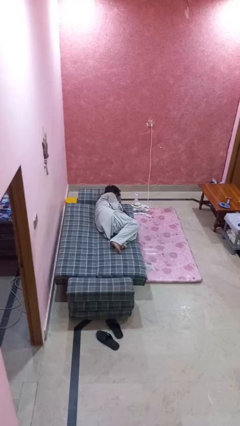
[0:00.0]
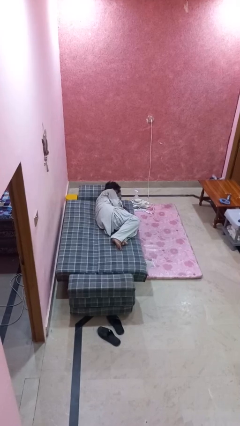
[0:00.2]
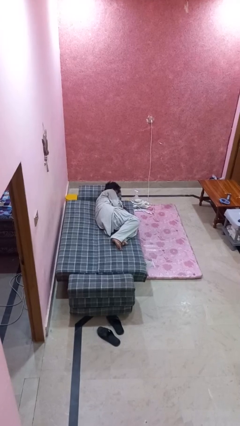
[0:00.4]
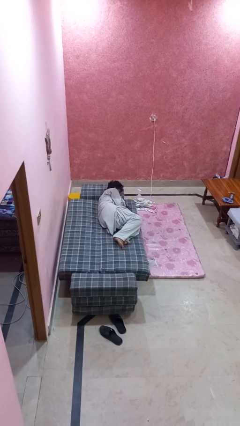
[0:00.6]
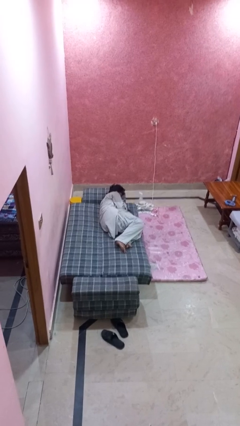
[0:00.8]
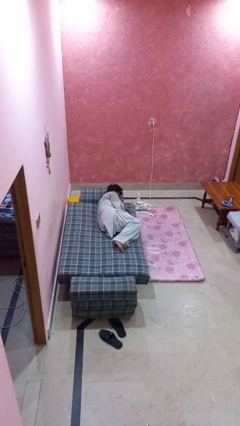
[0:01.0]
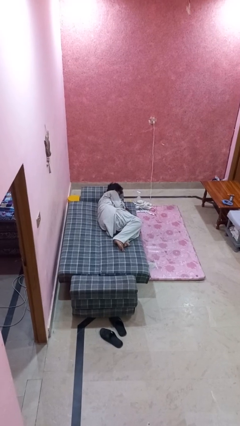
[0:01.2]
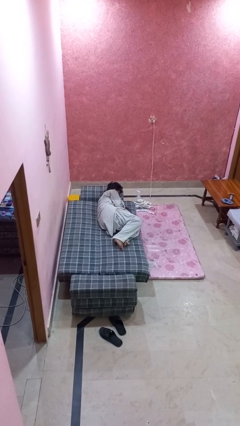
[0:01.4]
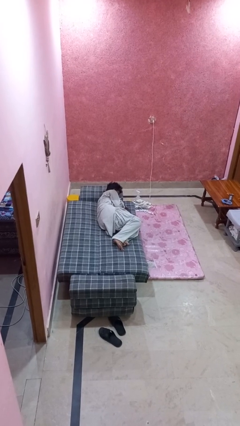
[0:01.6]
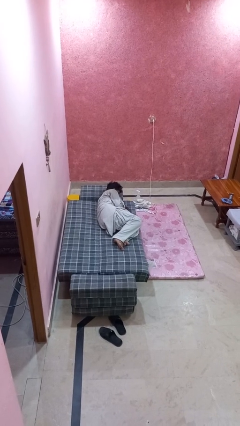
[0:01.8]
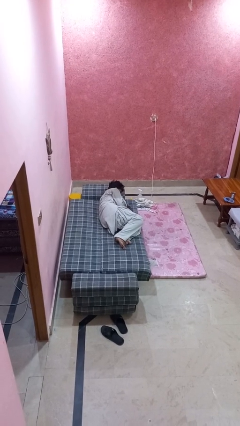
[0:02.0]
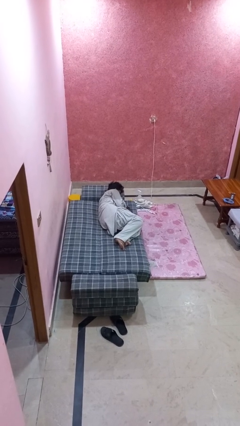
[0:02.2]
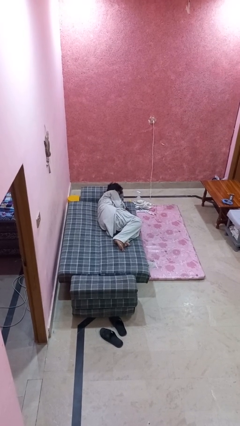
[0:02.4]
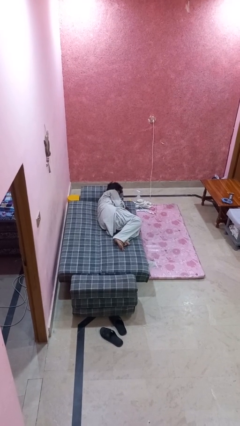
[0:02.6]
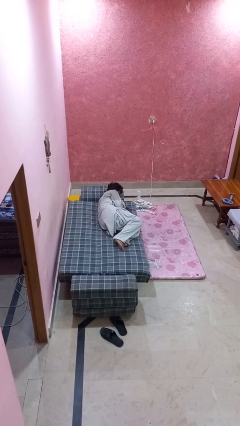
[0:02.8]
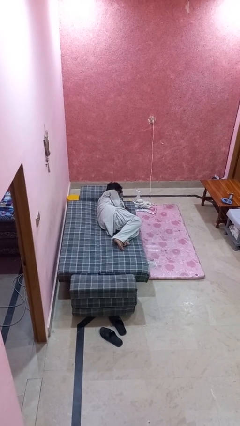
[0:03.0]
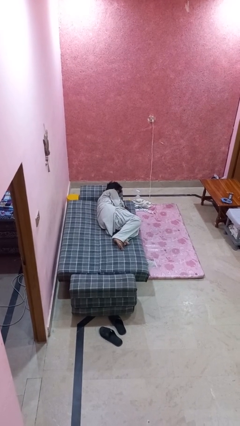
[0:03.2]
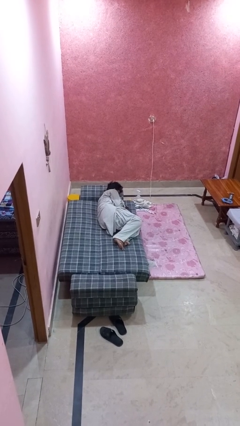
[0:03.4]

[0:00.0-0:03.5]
person lies down on bed

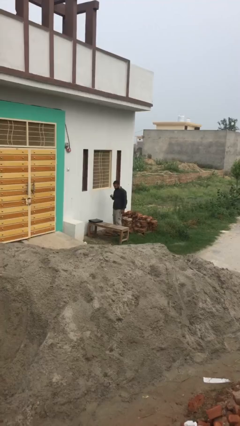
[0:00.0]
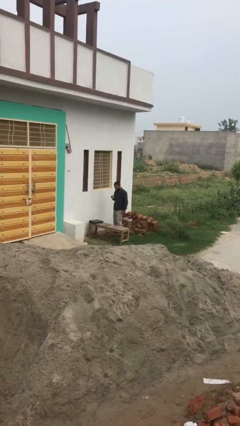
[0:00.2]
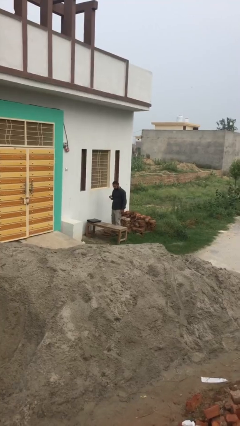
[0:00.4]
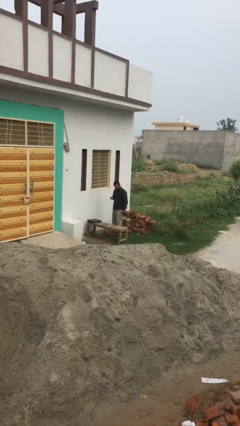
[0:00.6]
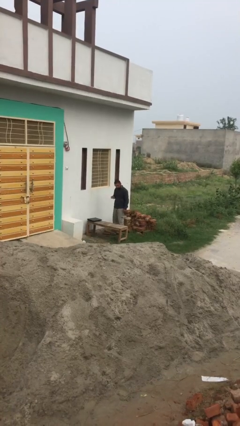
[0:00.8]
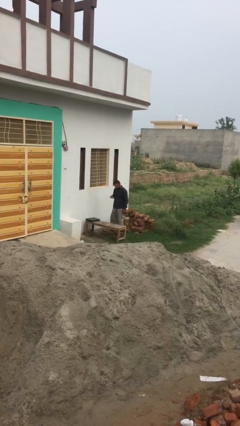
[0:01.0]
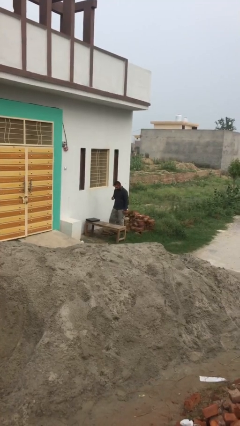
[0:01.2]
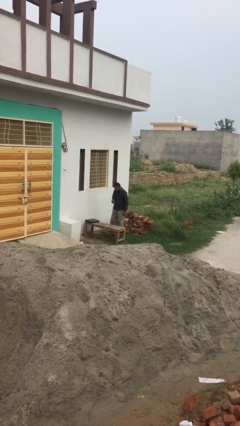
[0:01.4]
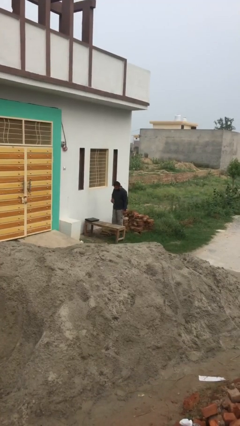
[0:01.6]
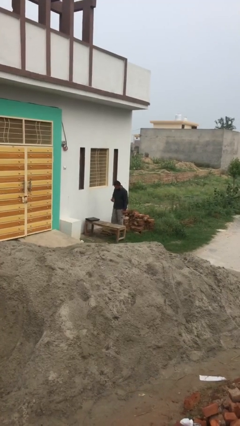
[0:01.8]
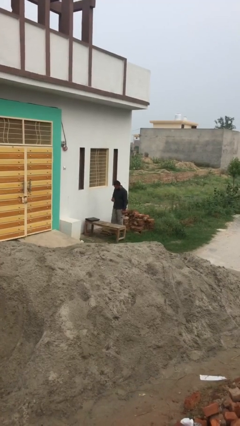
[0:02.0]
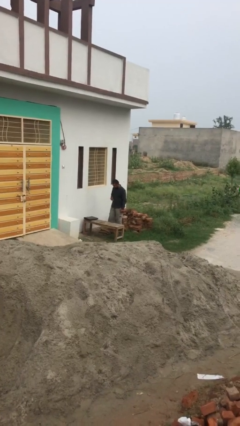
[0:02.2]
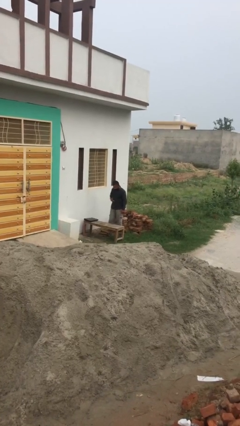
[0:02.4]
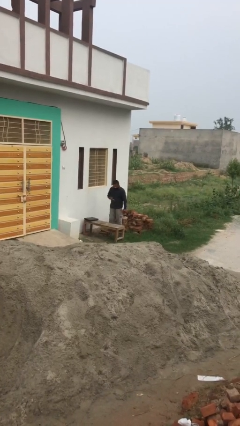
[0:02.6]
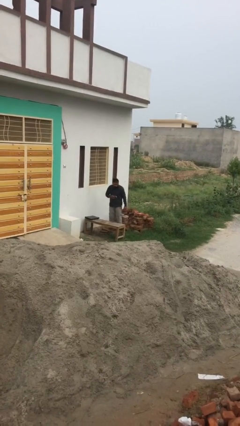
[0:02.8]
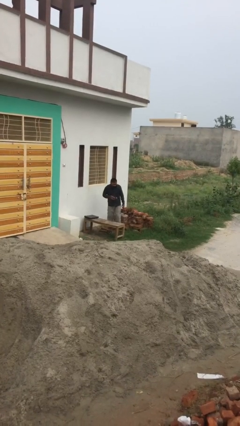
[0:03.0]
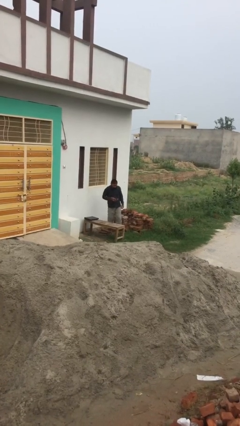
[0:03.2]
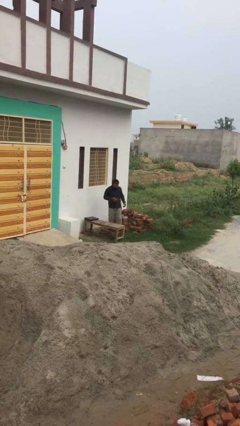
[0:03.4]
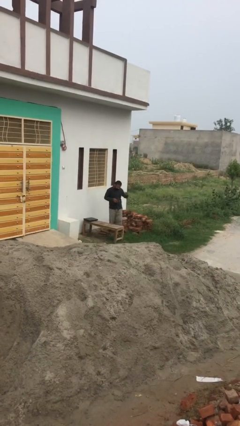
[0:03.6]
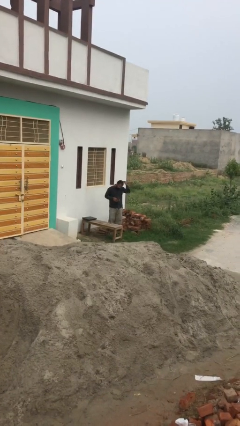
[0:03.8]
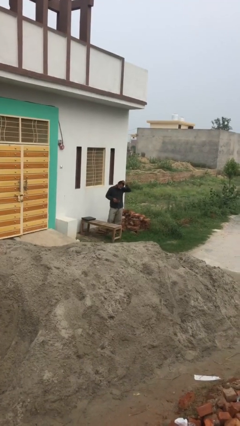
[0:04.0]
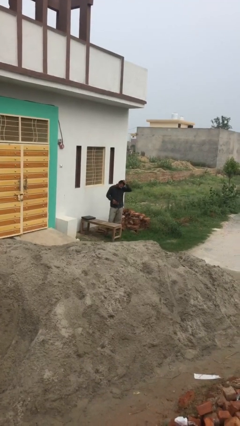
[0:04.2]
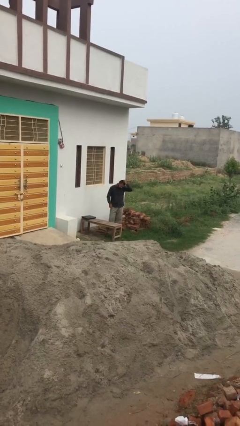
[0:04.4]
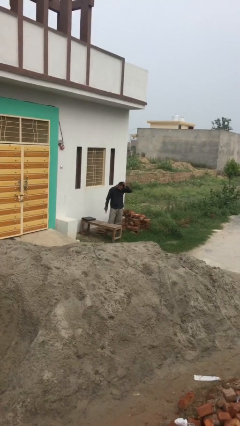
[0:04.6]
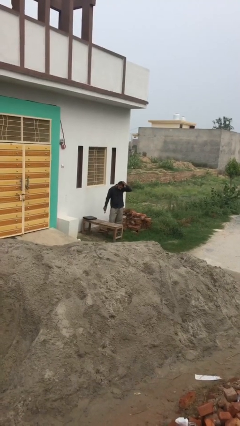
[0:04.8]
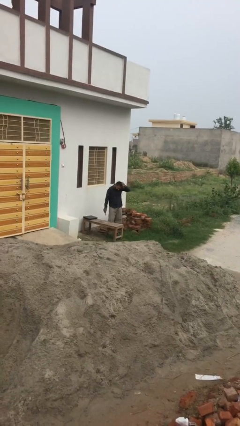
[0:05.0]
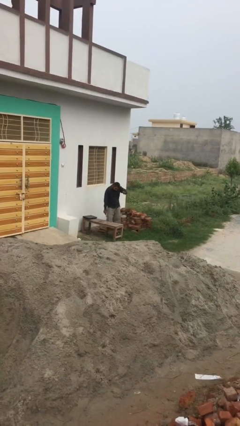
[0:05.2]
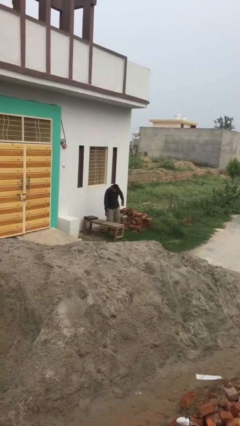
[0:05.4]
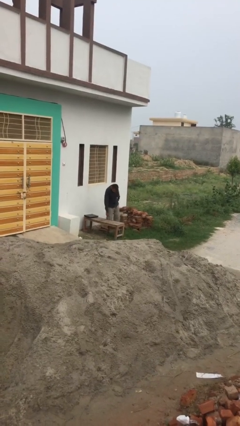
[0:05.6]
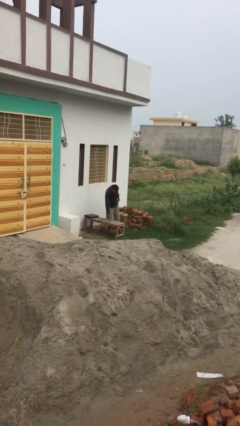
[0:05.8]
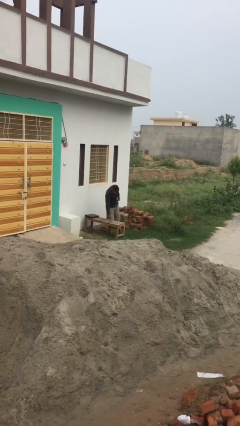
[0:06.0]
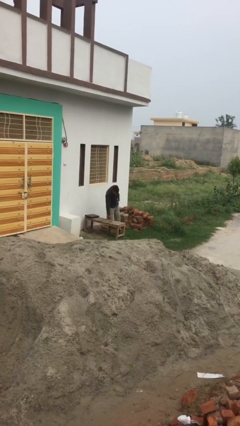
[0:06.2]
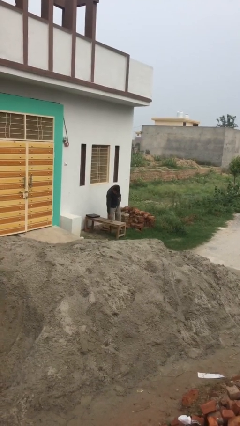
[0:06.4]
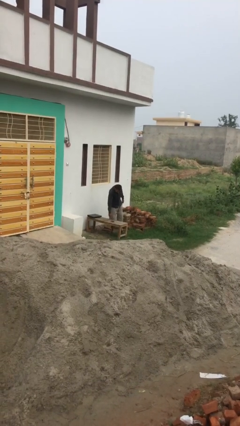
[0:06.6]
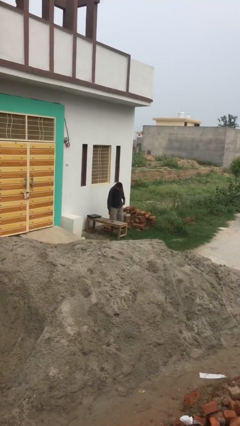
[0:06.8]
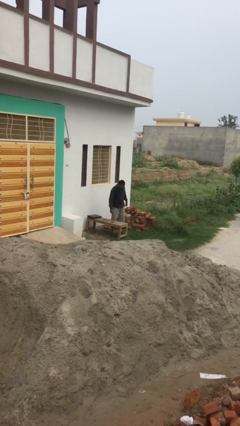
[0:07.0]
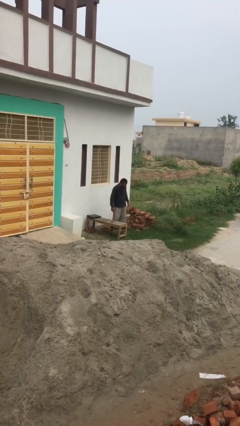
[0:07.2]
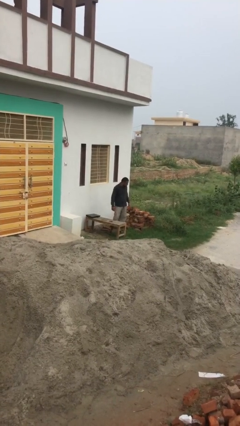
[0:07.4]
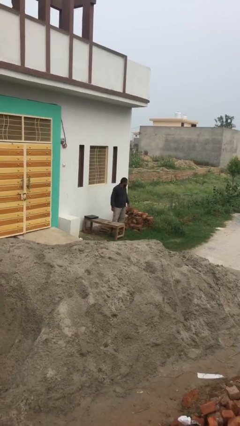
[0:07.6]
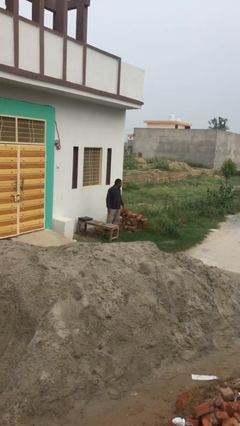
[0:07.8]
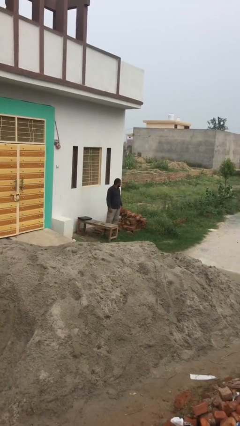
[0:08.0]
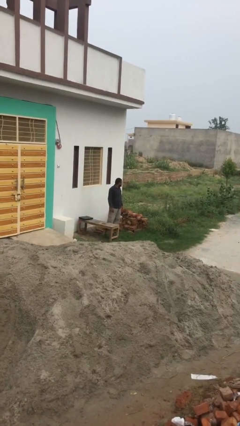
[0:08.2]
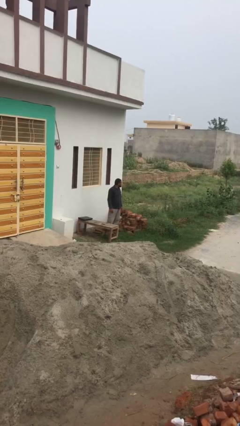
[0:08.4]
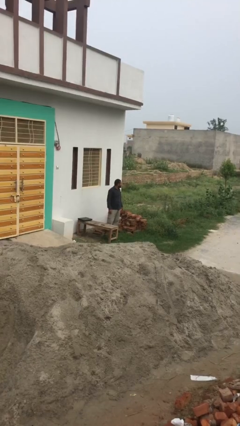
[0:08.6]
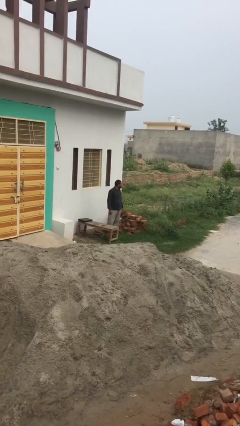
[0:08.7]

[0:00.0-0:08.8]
person puts down object on table

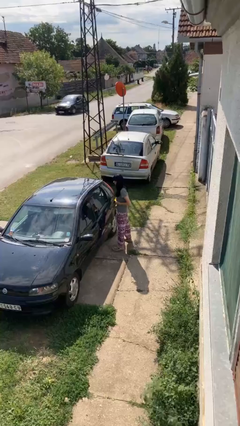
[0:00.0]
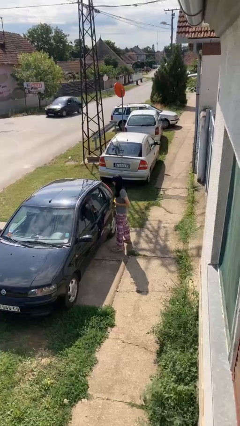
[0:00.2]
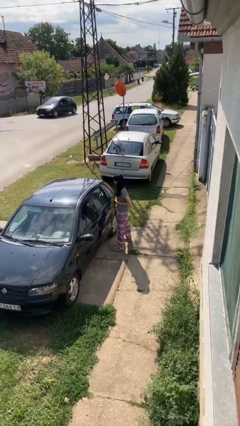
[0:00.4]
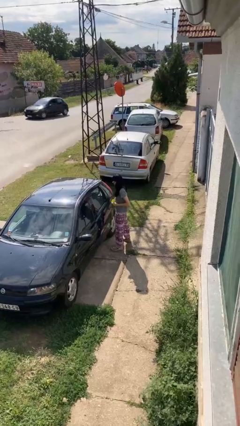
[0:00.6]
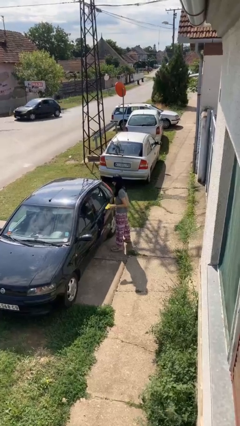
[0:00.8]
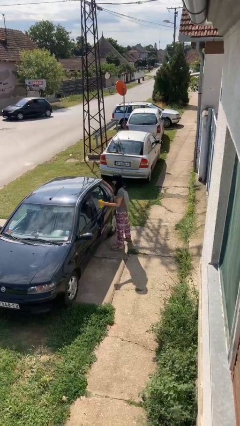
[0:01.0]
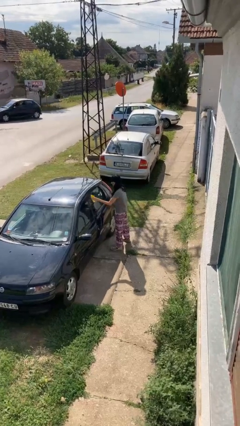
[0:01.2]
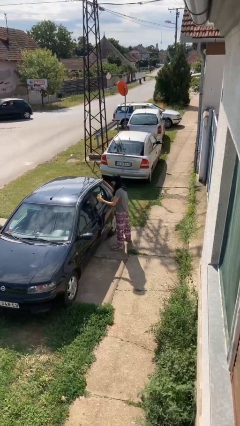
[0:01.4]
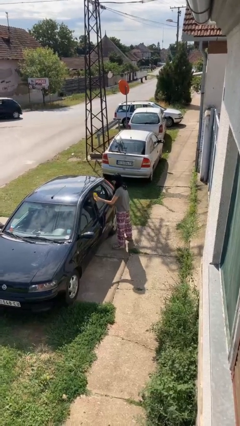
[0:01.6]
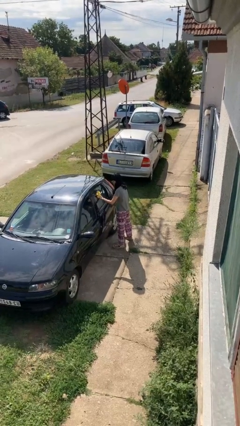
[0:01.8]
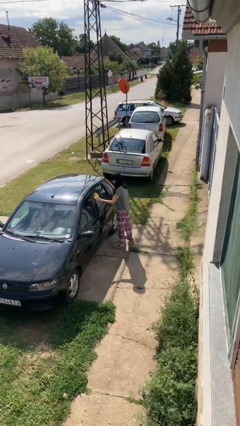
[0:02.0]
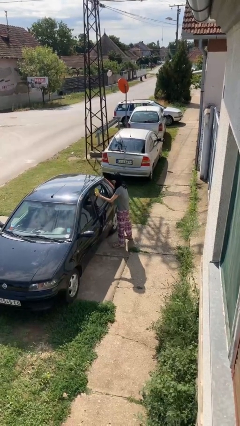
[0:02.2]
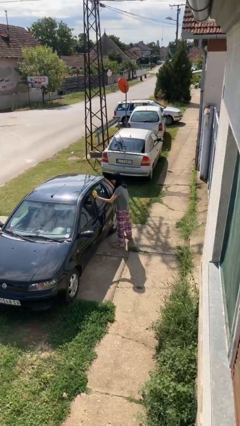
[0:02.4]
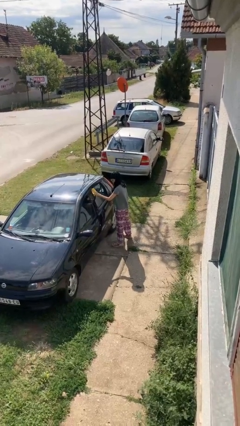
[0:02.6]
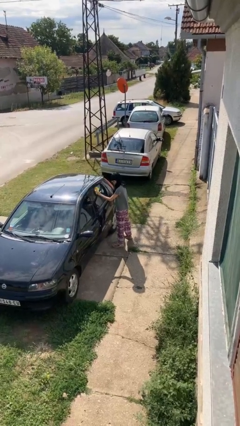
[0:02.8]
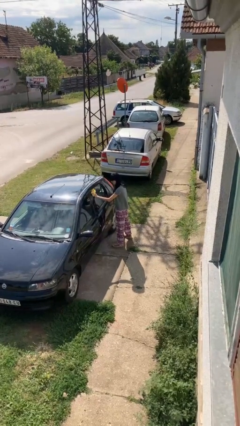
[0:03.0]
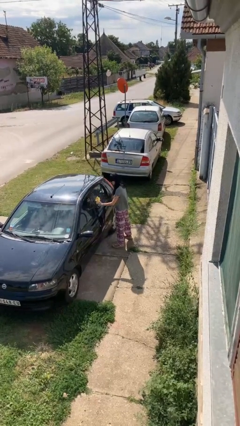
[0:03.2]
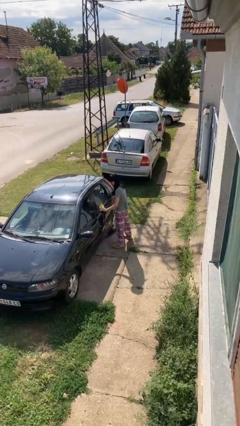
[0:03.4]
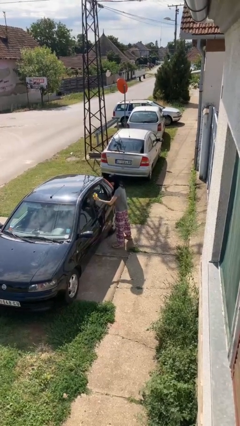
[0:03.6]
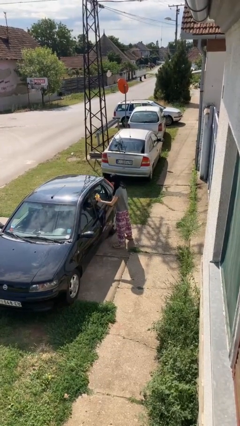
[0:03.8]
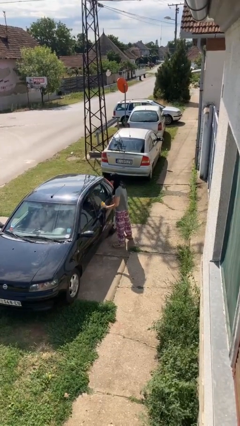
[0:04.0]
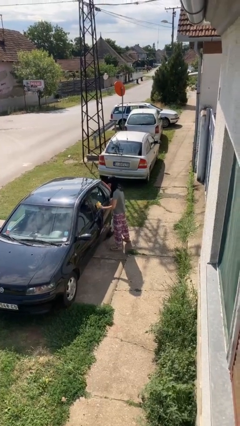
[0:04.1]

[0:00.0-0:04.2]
person polishes car with rag

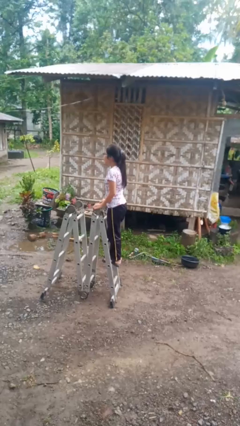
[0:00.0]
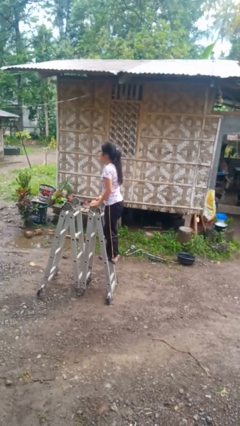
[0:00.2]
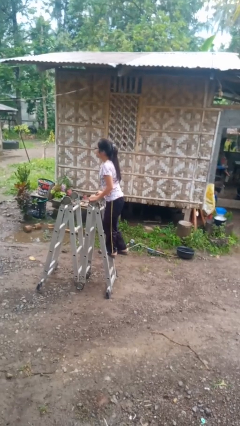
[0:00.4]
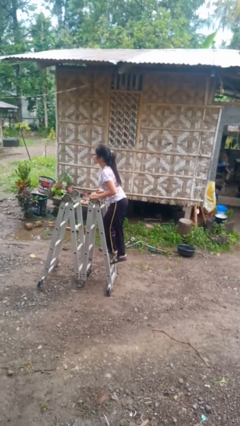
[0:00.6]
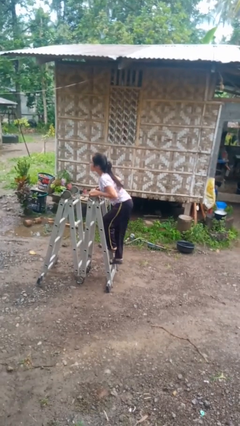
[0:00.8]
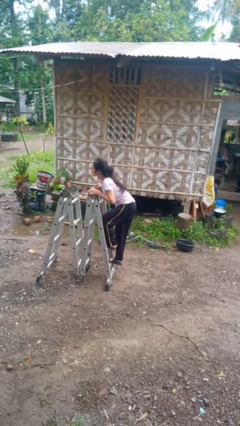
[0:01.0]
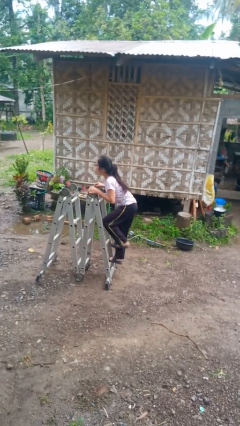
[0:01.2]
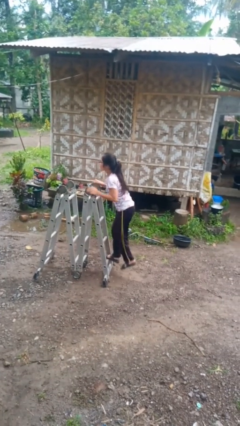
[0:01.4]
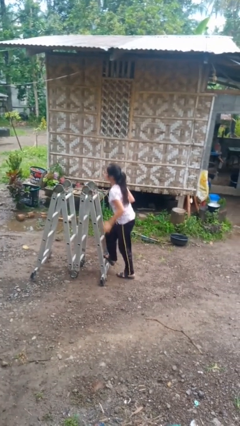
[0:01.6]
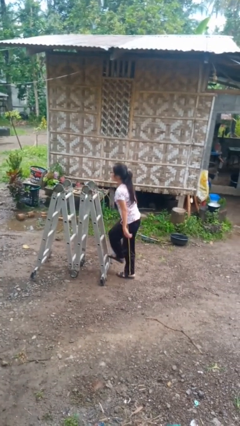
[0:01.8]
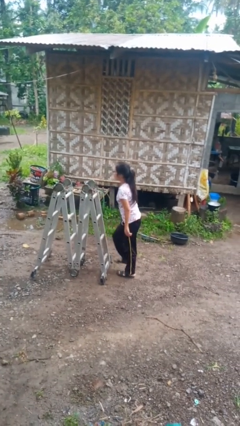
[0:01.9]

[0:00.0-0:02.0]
person climbs down ladder
